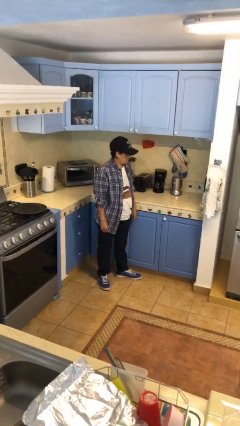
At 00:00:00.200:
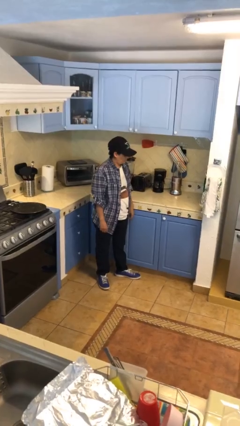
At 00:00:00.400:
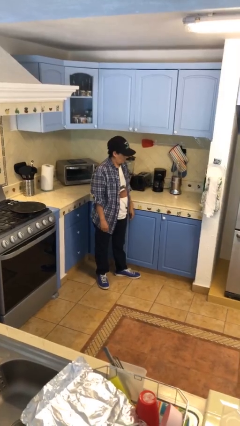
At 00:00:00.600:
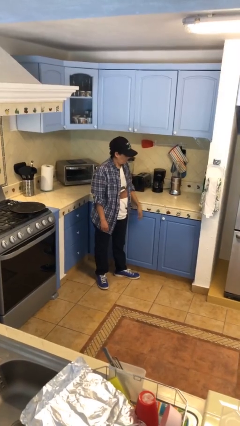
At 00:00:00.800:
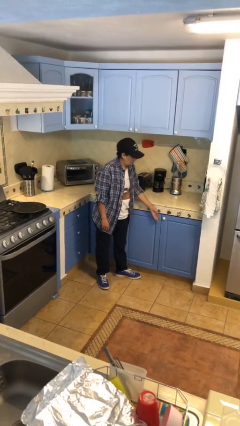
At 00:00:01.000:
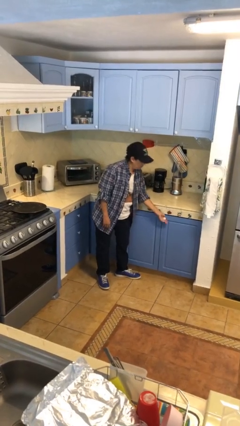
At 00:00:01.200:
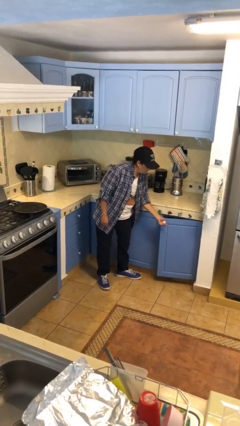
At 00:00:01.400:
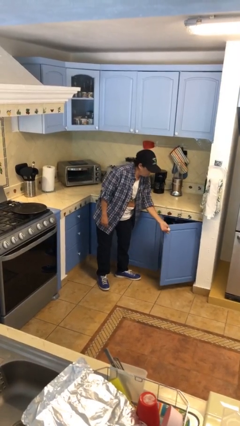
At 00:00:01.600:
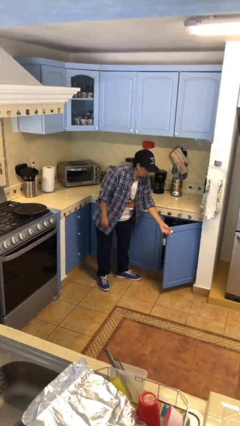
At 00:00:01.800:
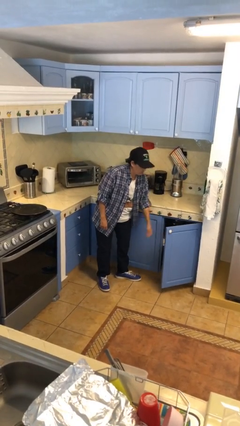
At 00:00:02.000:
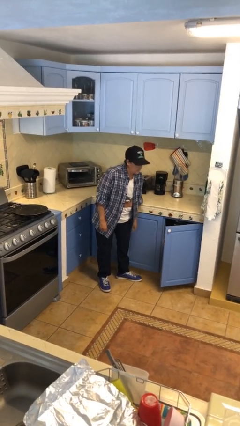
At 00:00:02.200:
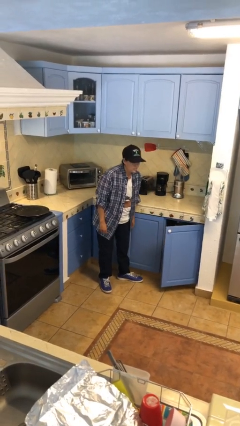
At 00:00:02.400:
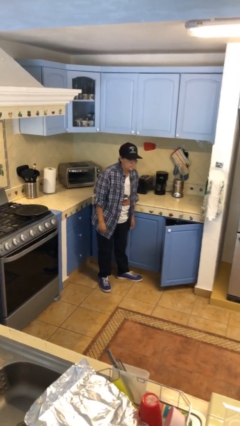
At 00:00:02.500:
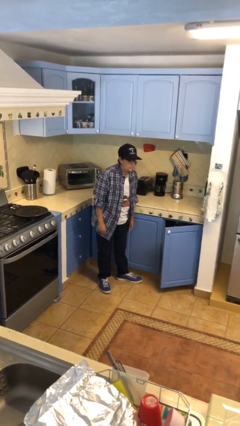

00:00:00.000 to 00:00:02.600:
person opens cabinet

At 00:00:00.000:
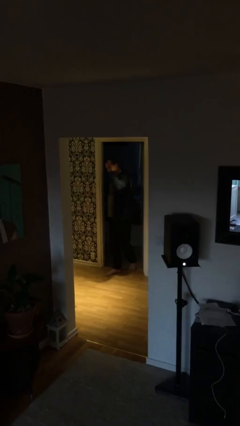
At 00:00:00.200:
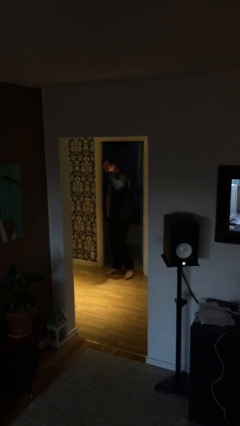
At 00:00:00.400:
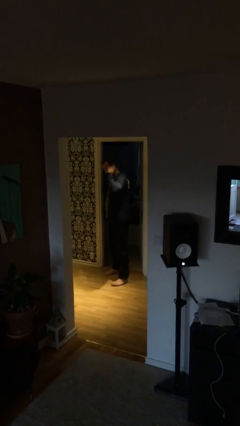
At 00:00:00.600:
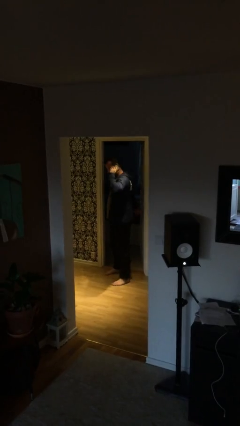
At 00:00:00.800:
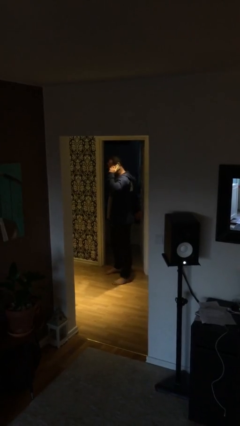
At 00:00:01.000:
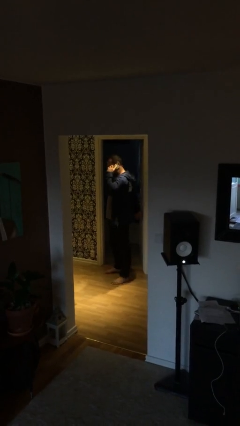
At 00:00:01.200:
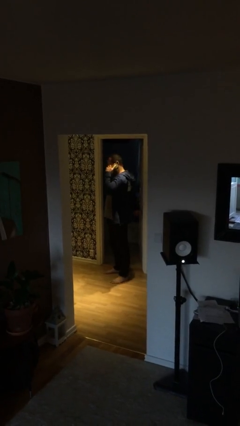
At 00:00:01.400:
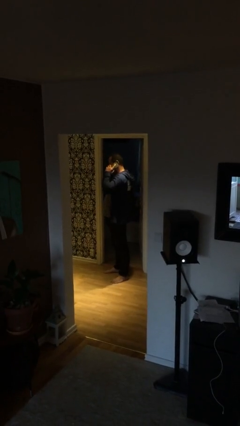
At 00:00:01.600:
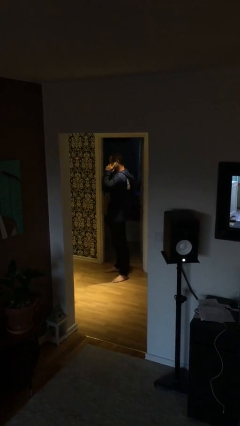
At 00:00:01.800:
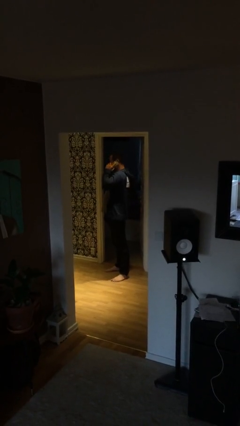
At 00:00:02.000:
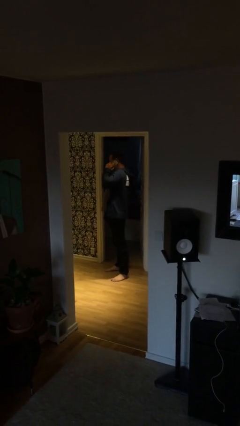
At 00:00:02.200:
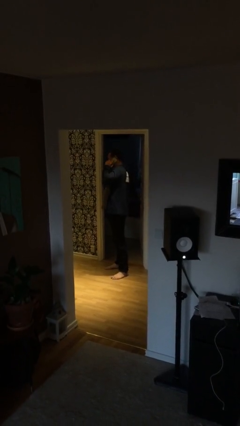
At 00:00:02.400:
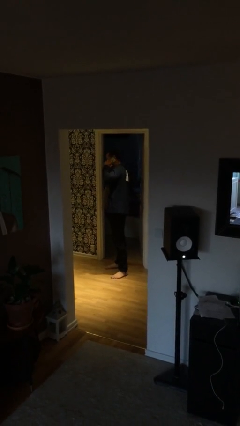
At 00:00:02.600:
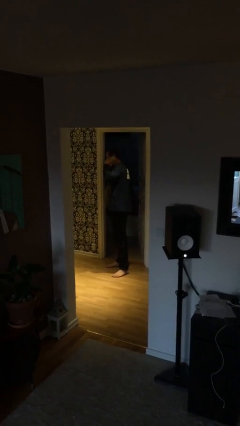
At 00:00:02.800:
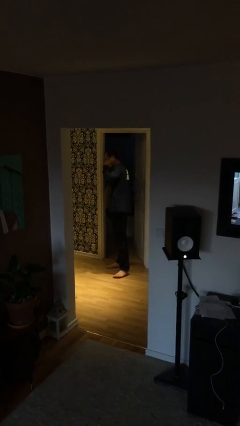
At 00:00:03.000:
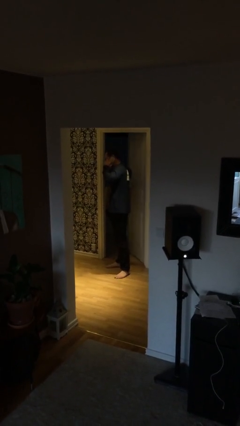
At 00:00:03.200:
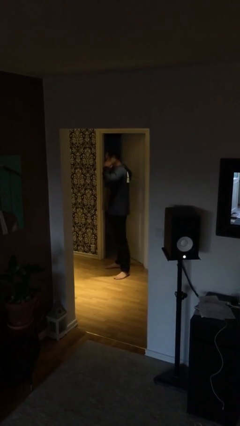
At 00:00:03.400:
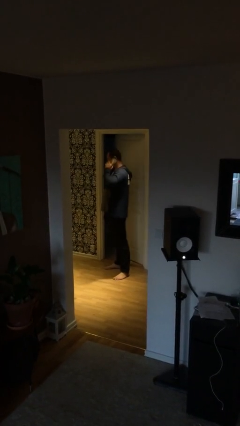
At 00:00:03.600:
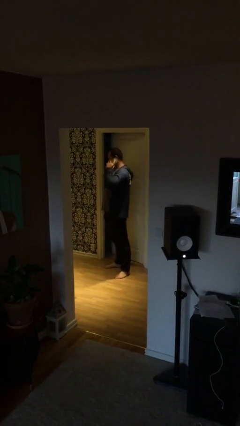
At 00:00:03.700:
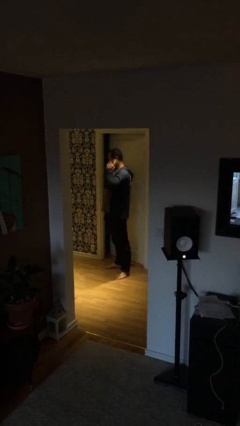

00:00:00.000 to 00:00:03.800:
person enters scene through structure

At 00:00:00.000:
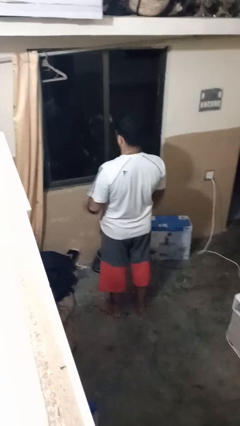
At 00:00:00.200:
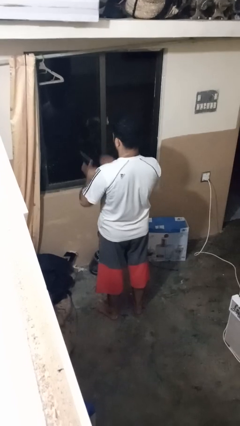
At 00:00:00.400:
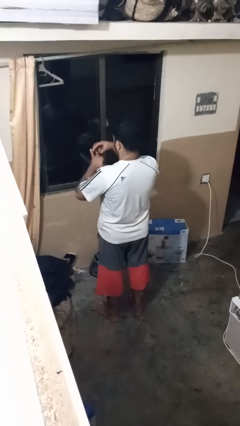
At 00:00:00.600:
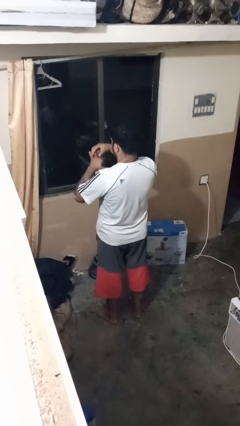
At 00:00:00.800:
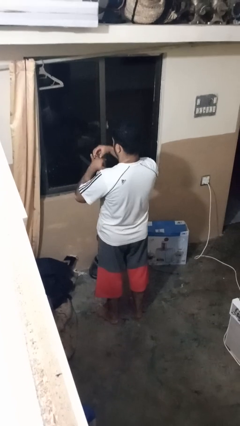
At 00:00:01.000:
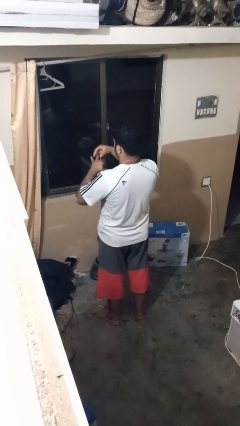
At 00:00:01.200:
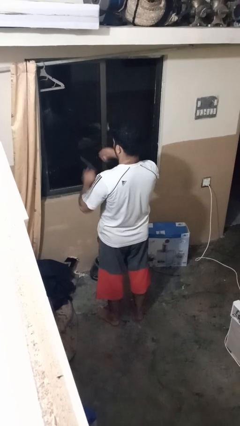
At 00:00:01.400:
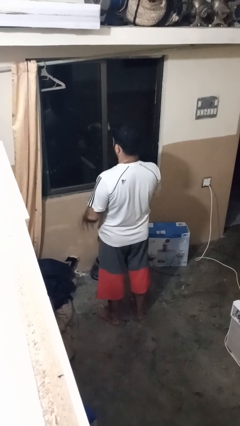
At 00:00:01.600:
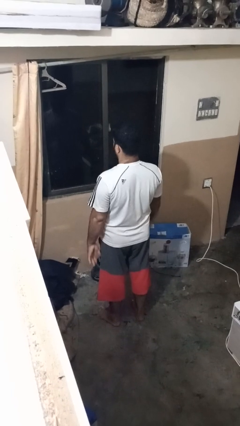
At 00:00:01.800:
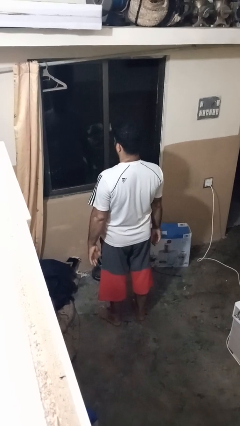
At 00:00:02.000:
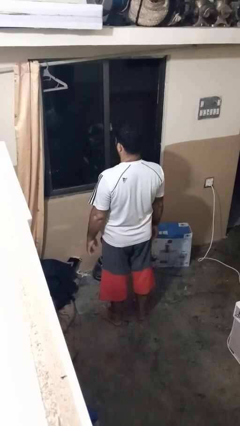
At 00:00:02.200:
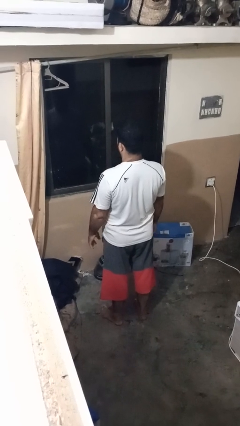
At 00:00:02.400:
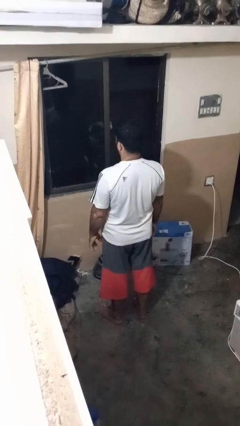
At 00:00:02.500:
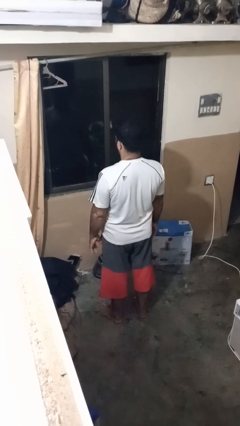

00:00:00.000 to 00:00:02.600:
person takes off ring

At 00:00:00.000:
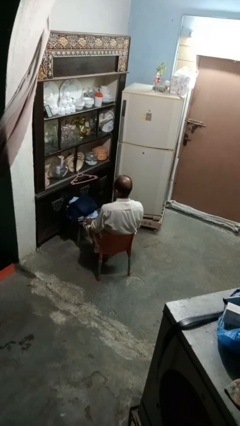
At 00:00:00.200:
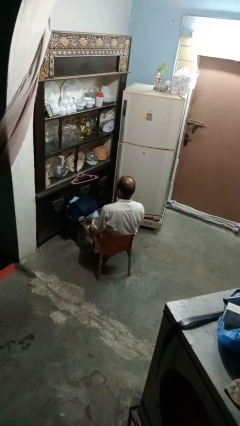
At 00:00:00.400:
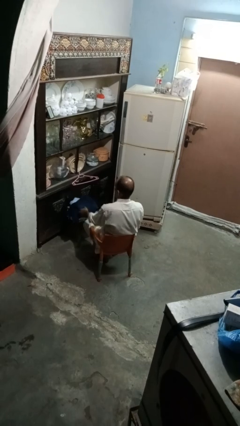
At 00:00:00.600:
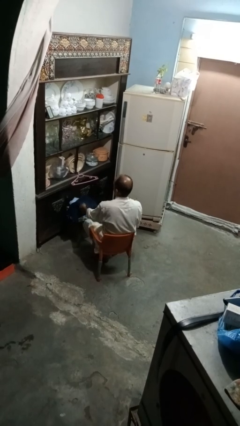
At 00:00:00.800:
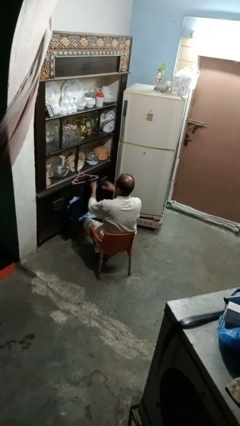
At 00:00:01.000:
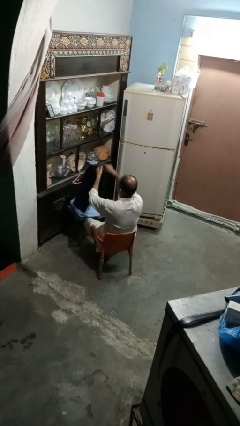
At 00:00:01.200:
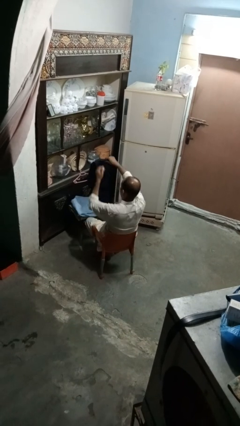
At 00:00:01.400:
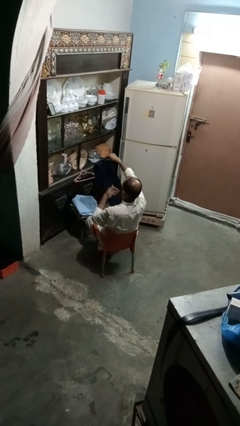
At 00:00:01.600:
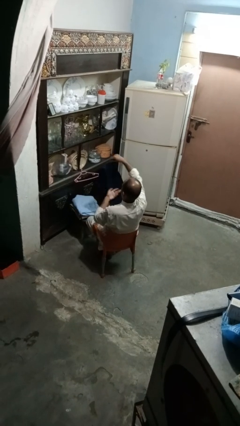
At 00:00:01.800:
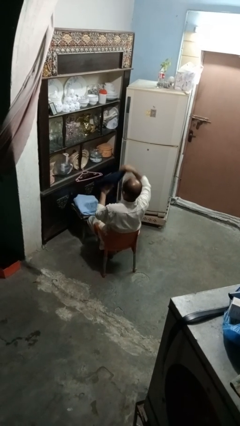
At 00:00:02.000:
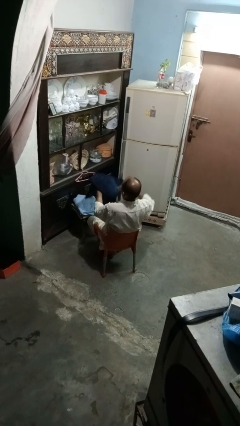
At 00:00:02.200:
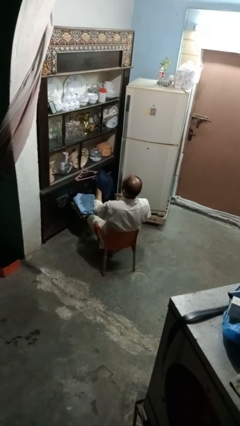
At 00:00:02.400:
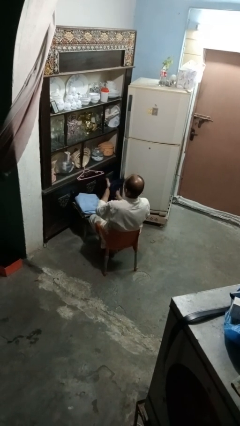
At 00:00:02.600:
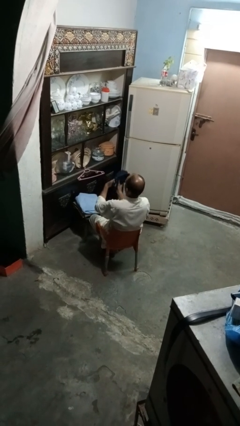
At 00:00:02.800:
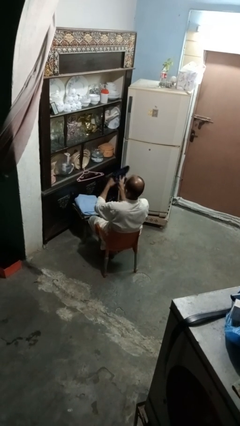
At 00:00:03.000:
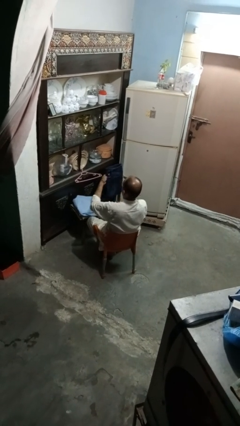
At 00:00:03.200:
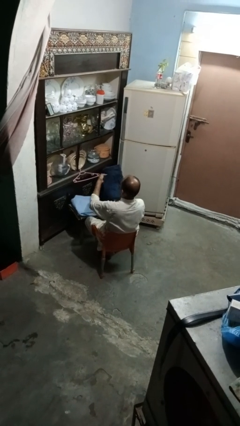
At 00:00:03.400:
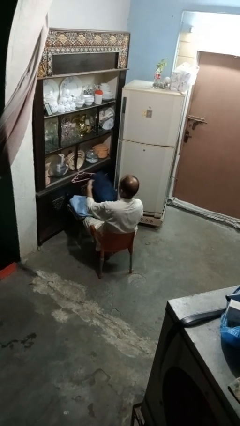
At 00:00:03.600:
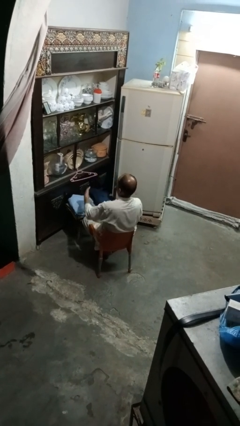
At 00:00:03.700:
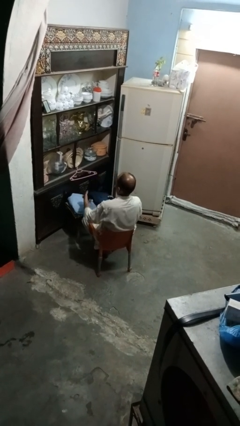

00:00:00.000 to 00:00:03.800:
person folds pants

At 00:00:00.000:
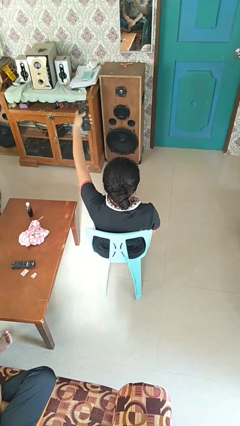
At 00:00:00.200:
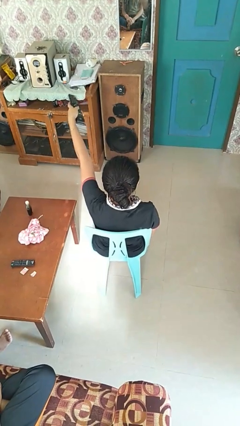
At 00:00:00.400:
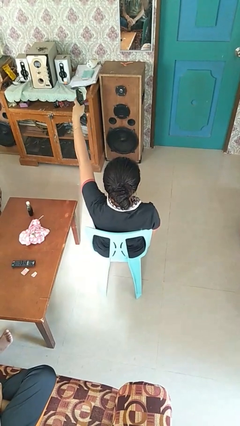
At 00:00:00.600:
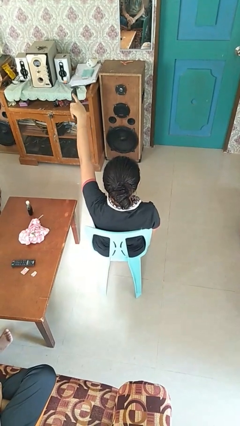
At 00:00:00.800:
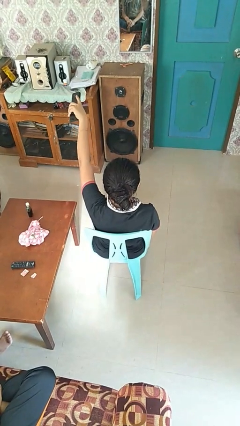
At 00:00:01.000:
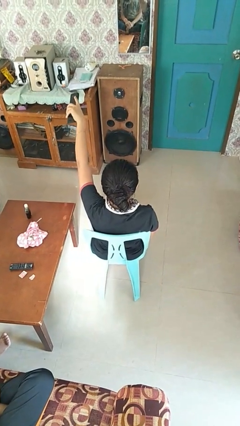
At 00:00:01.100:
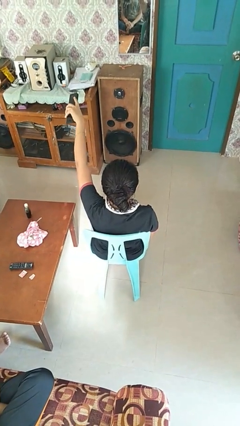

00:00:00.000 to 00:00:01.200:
person uses television remote

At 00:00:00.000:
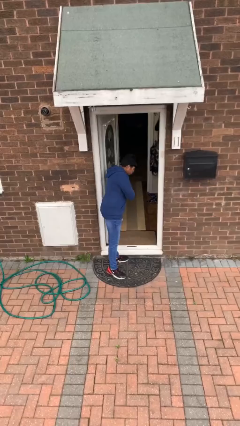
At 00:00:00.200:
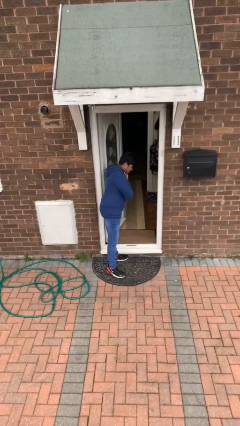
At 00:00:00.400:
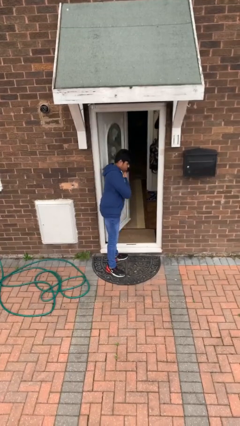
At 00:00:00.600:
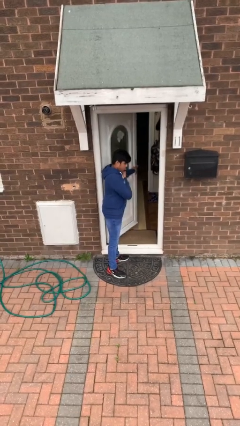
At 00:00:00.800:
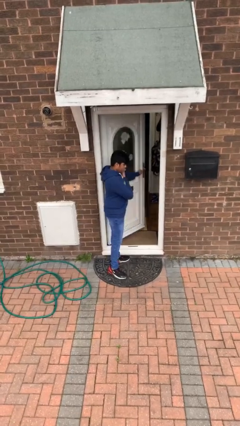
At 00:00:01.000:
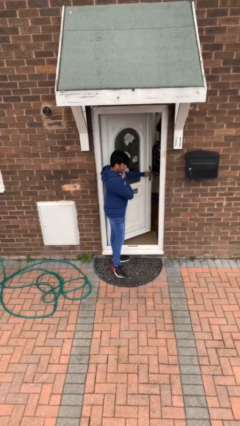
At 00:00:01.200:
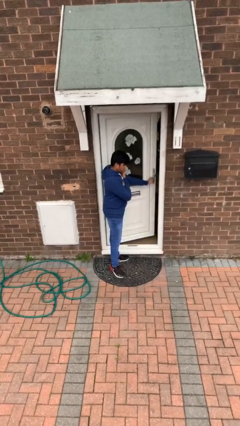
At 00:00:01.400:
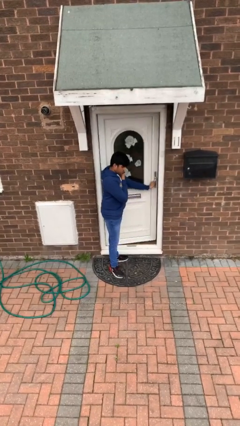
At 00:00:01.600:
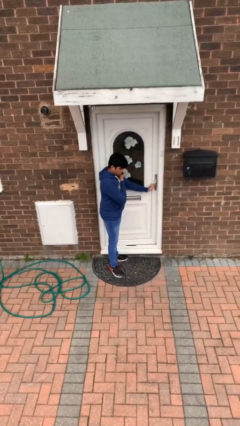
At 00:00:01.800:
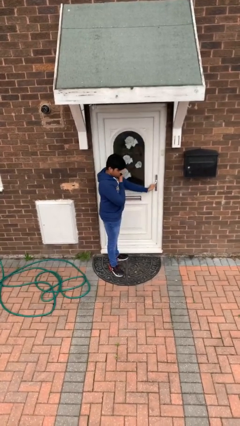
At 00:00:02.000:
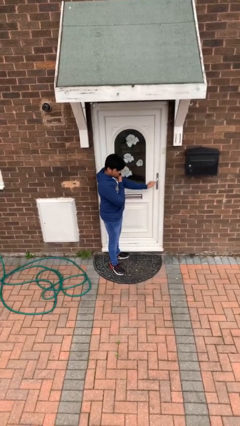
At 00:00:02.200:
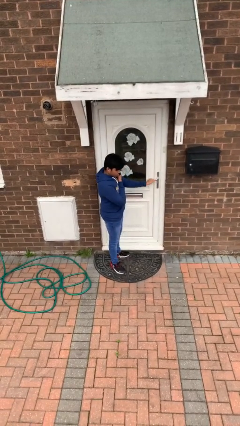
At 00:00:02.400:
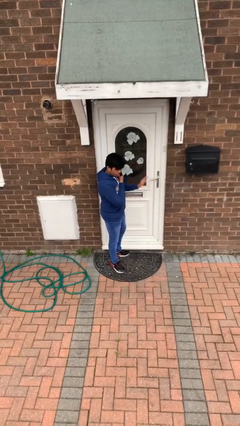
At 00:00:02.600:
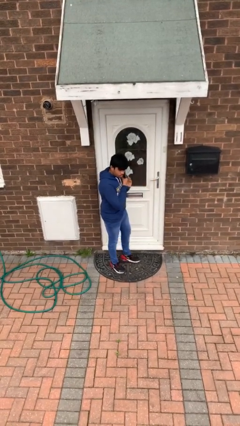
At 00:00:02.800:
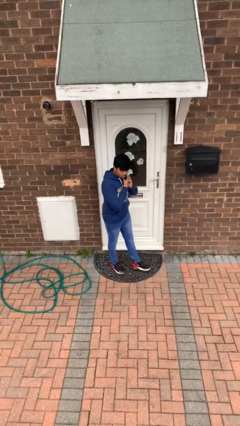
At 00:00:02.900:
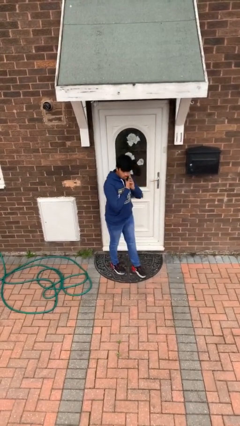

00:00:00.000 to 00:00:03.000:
person closes facility door
